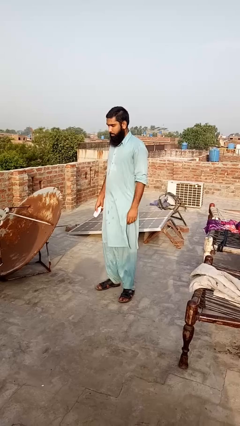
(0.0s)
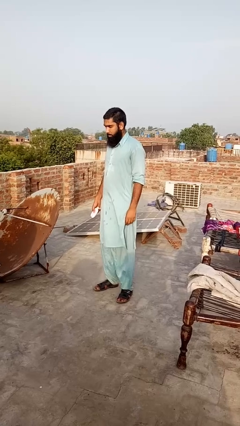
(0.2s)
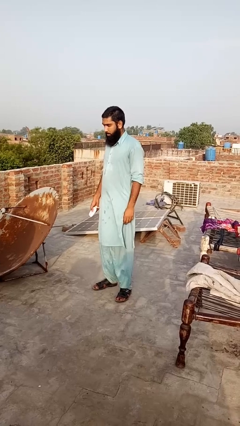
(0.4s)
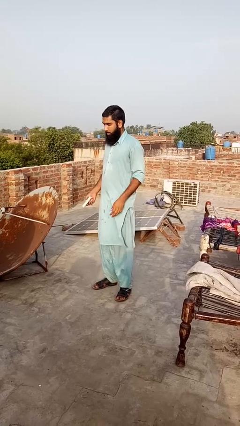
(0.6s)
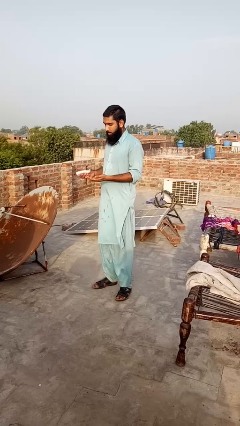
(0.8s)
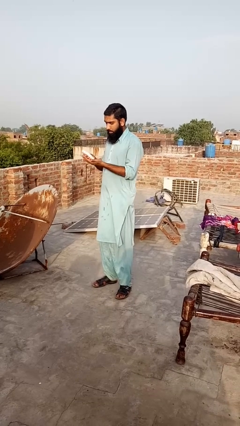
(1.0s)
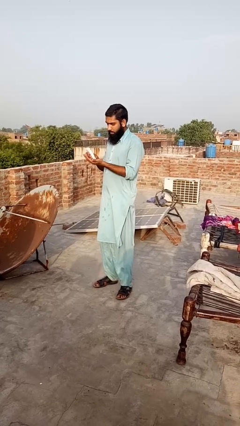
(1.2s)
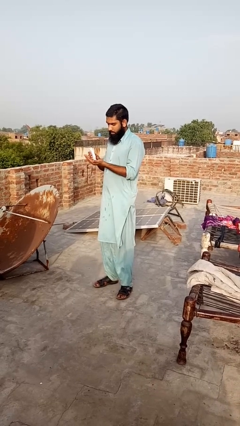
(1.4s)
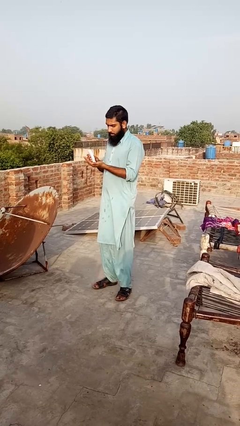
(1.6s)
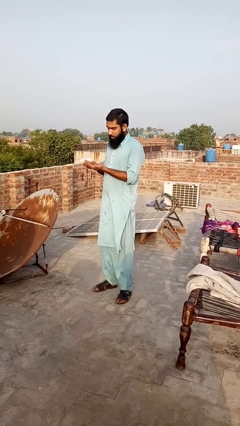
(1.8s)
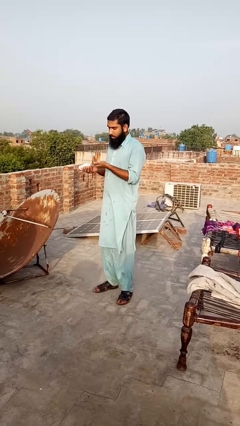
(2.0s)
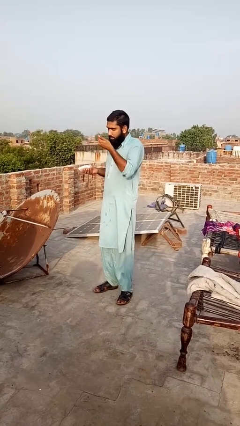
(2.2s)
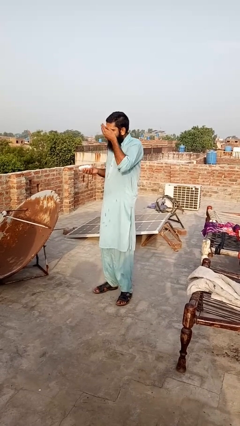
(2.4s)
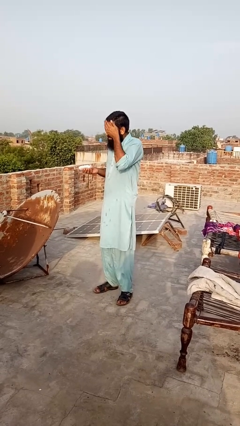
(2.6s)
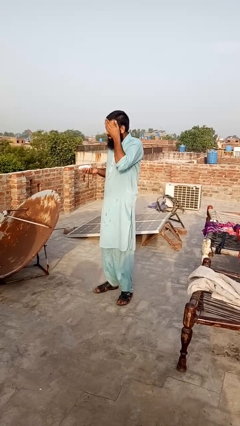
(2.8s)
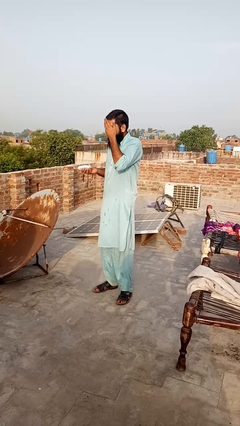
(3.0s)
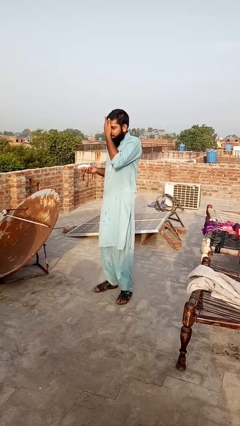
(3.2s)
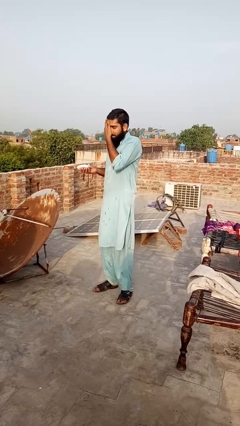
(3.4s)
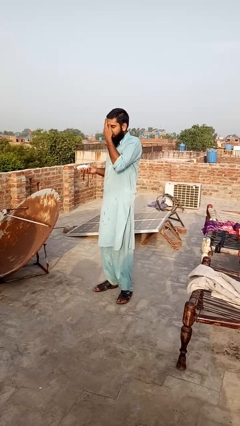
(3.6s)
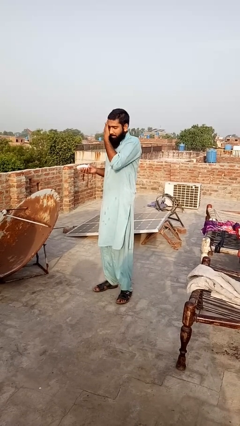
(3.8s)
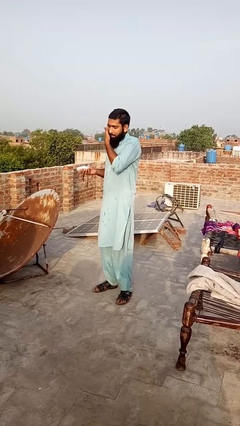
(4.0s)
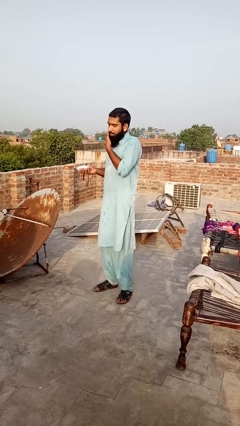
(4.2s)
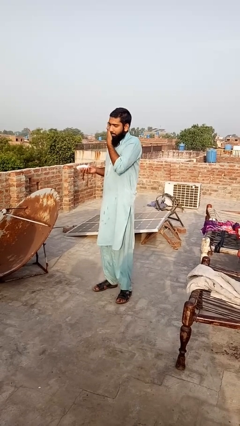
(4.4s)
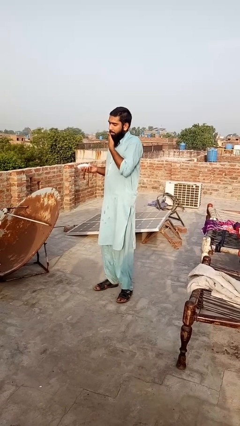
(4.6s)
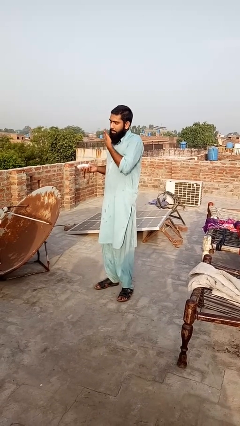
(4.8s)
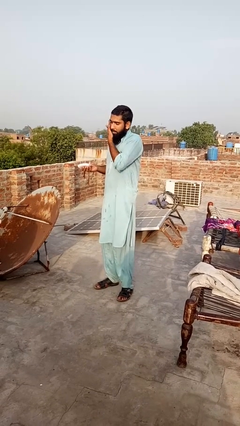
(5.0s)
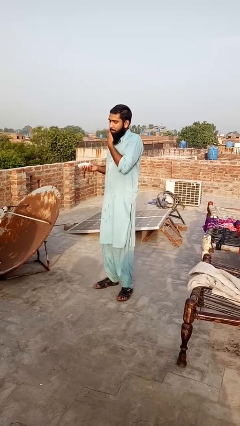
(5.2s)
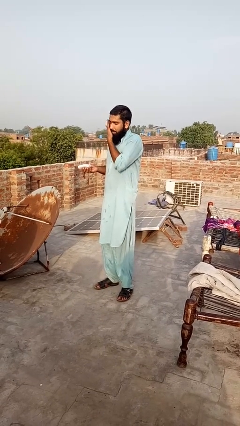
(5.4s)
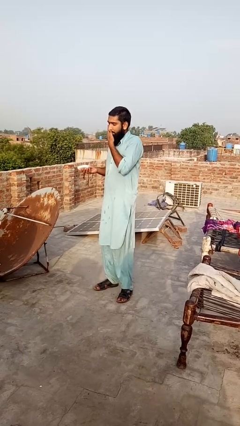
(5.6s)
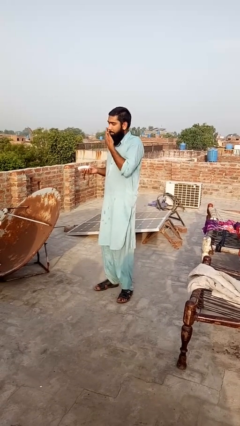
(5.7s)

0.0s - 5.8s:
person applies facial moisturizer

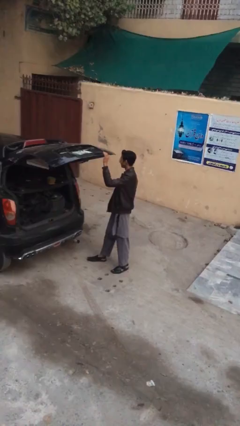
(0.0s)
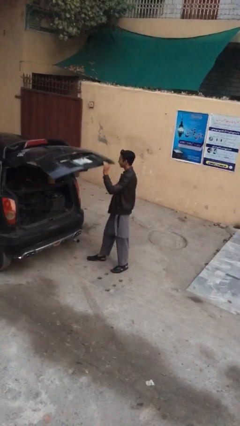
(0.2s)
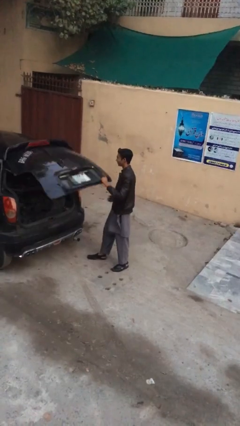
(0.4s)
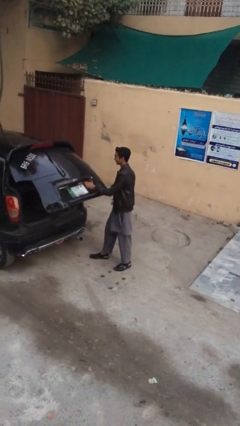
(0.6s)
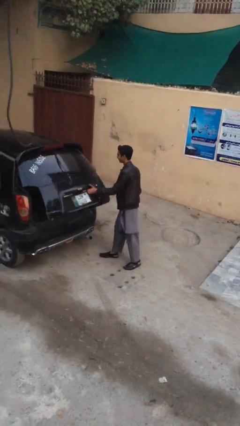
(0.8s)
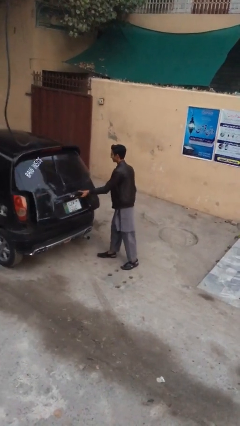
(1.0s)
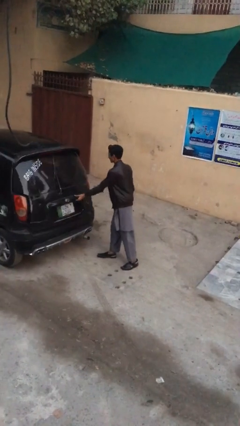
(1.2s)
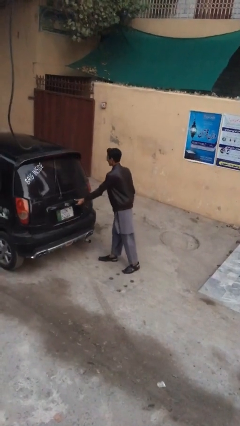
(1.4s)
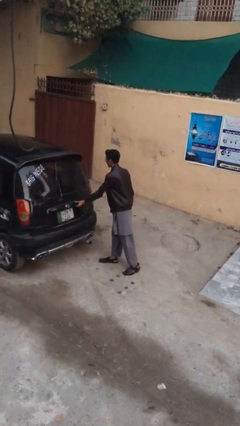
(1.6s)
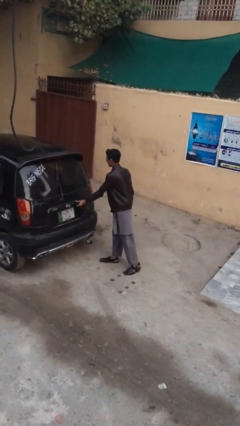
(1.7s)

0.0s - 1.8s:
person closes car trunk

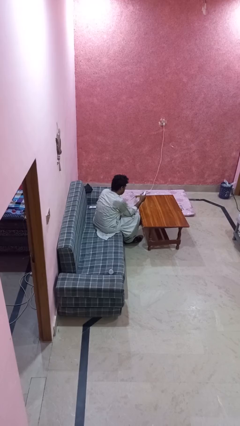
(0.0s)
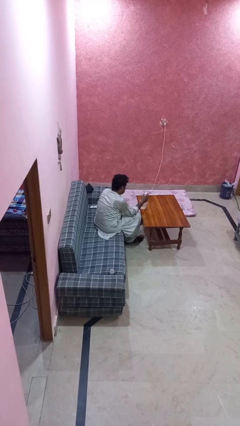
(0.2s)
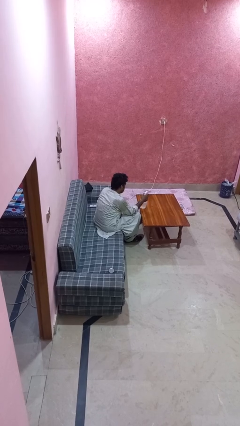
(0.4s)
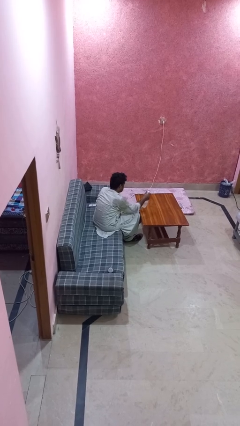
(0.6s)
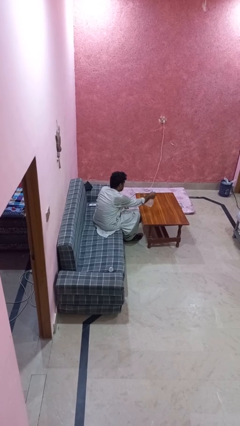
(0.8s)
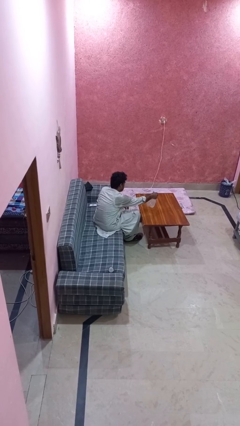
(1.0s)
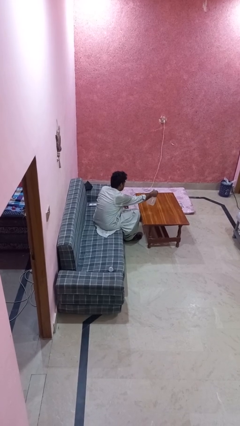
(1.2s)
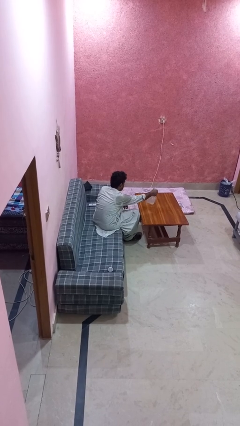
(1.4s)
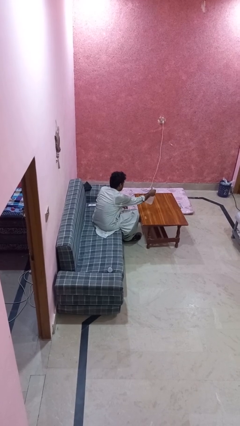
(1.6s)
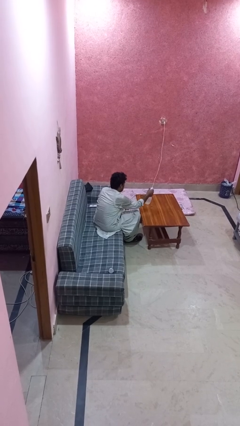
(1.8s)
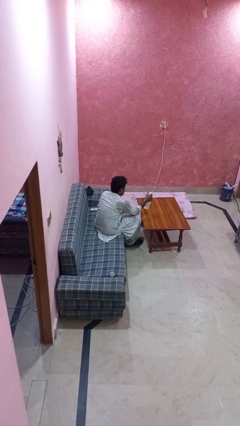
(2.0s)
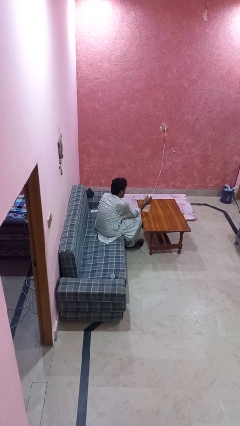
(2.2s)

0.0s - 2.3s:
person sprays from bottle

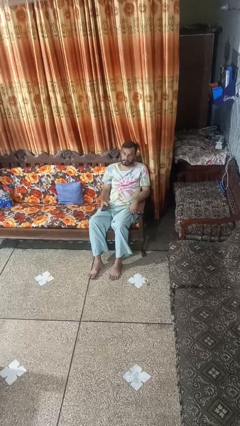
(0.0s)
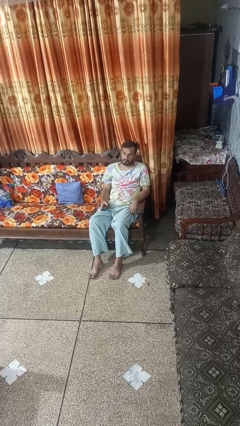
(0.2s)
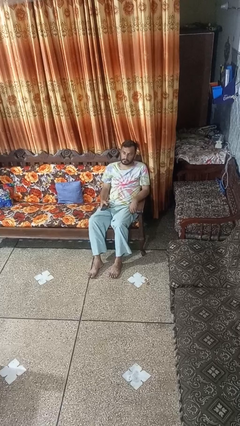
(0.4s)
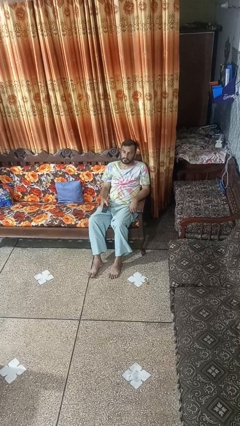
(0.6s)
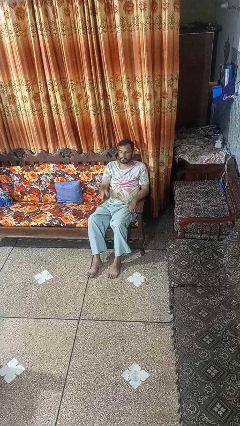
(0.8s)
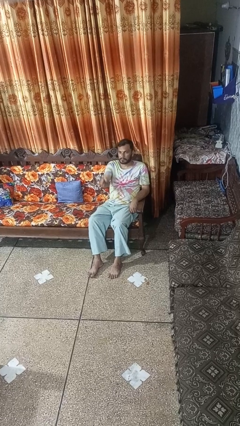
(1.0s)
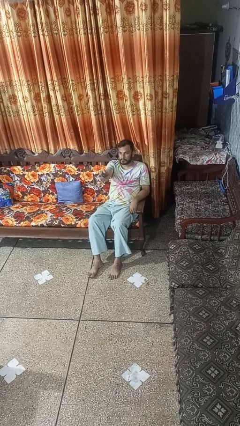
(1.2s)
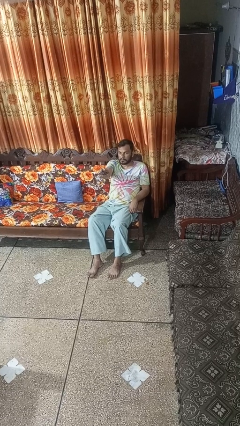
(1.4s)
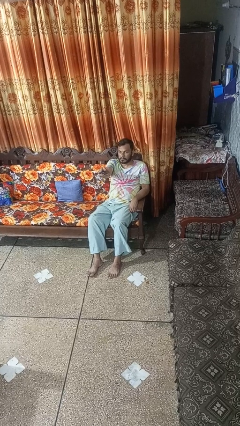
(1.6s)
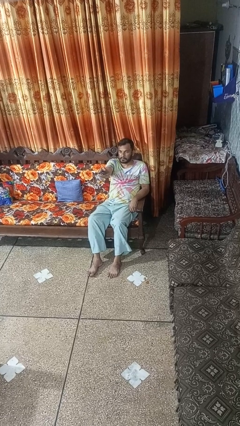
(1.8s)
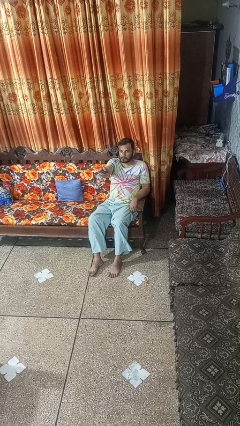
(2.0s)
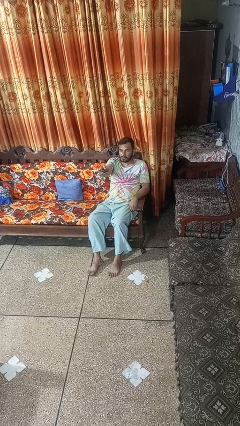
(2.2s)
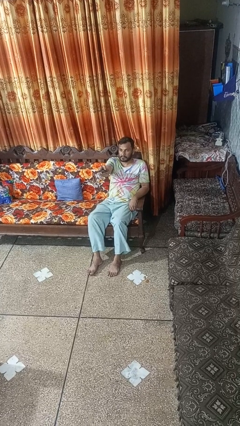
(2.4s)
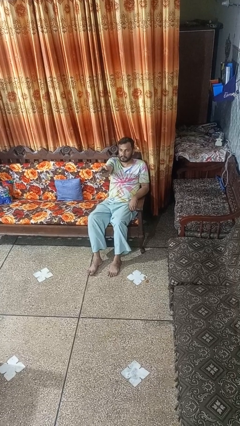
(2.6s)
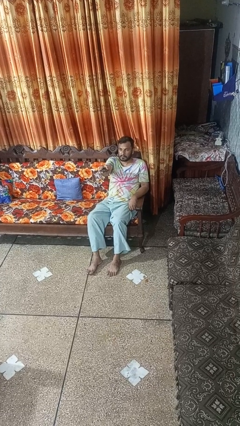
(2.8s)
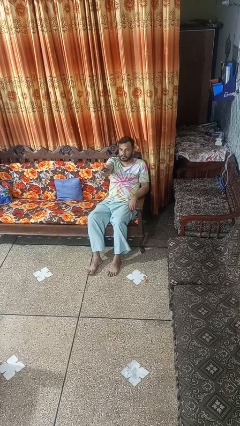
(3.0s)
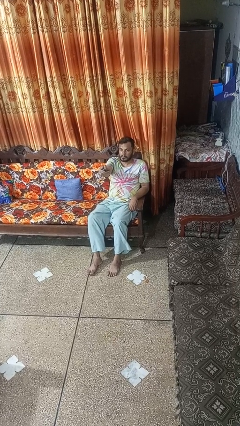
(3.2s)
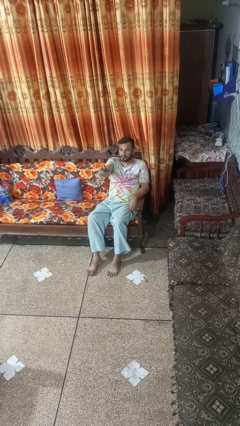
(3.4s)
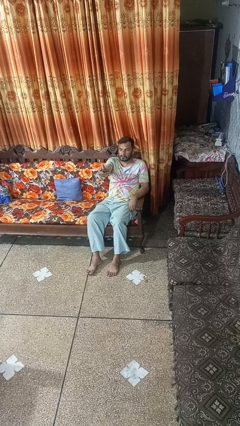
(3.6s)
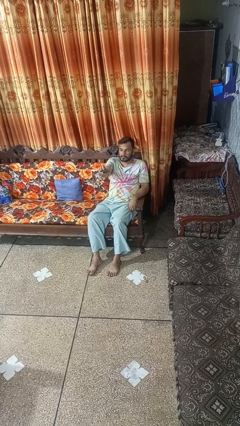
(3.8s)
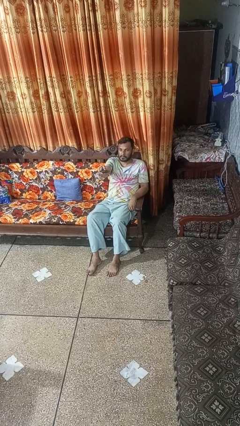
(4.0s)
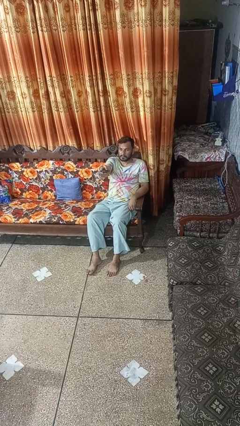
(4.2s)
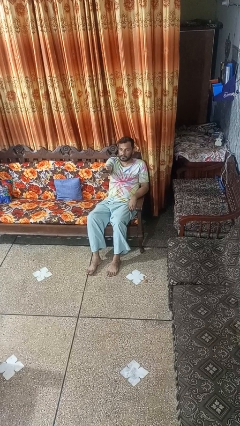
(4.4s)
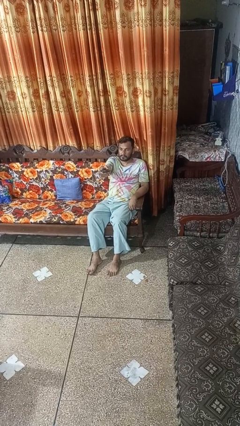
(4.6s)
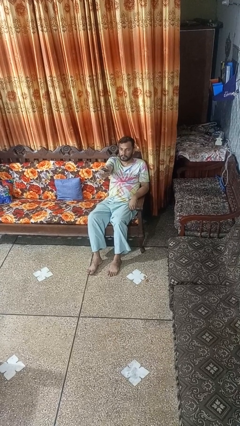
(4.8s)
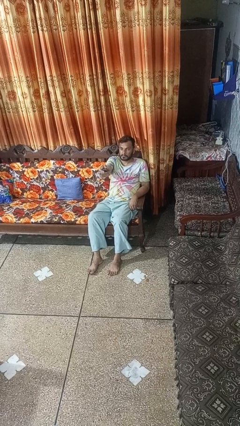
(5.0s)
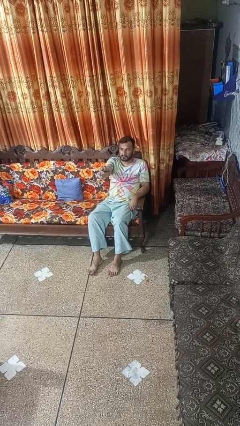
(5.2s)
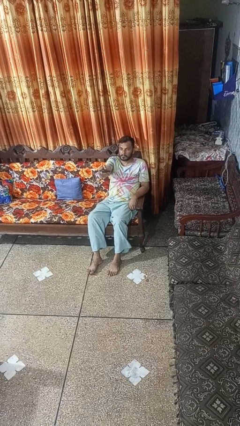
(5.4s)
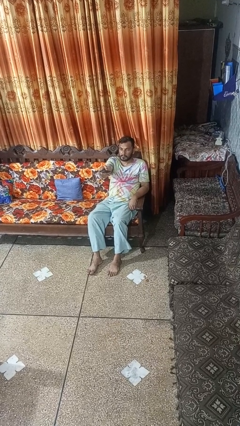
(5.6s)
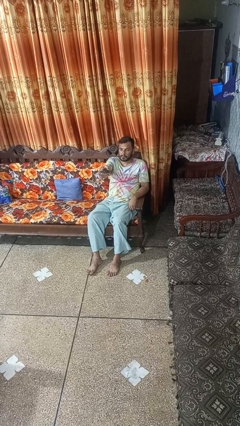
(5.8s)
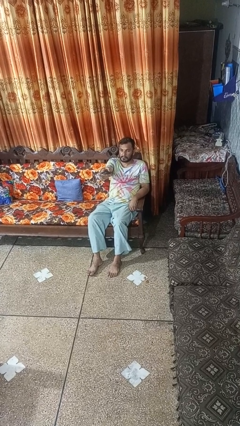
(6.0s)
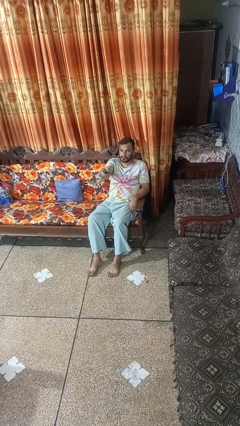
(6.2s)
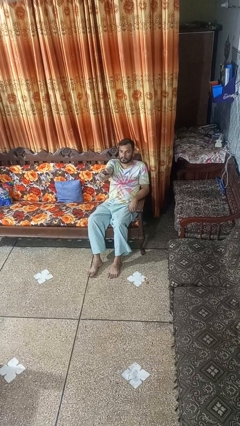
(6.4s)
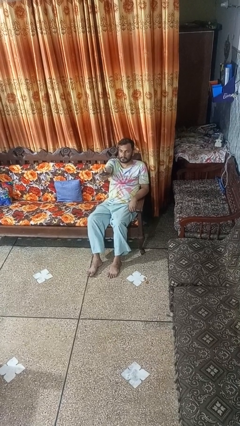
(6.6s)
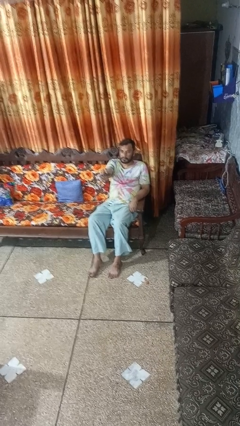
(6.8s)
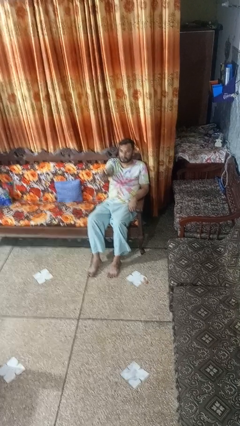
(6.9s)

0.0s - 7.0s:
person uses television remote

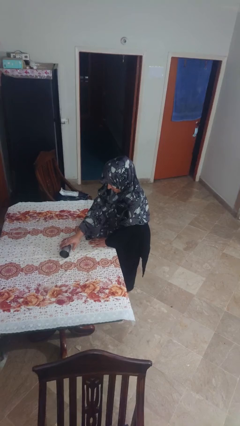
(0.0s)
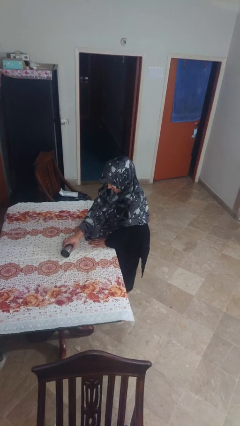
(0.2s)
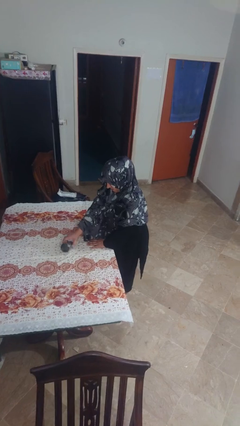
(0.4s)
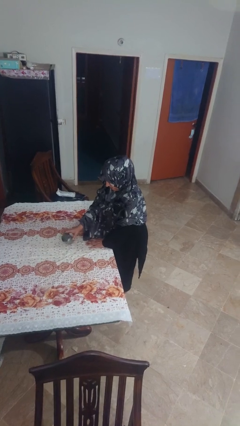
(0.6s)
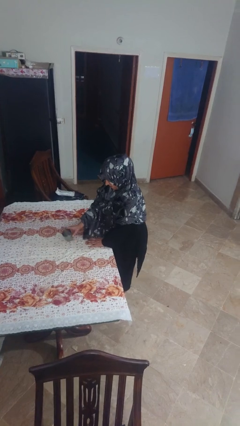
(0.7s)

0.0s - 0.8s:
person sets upright glass
